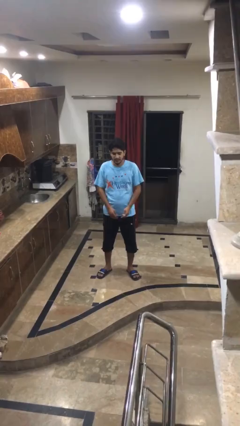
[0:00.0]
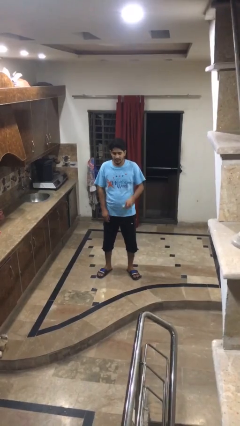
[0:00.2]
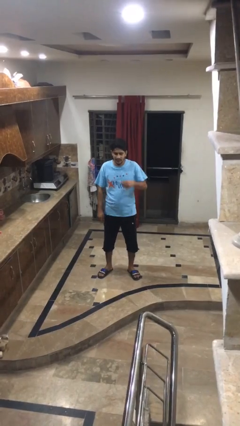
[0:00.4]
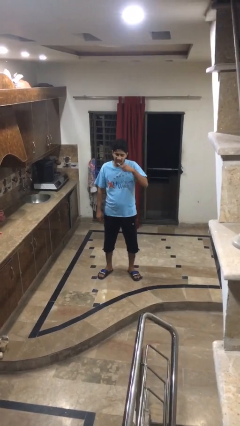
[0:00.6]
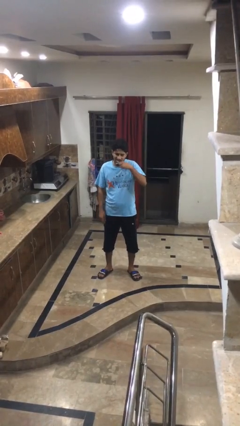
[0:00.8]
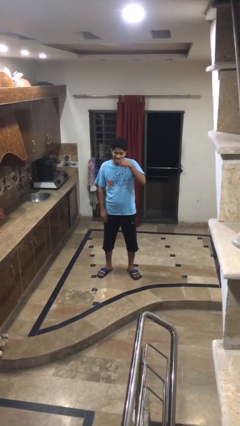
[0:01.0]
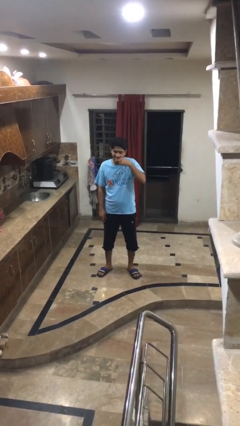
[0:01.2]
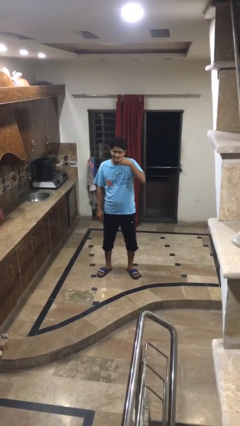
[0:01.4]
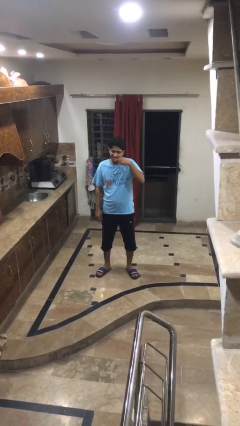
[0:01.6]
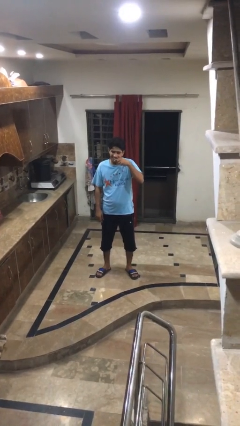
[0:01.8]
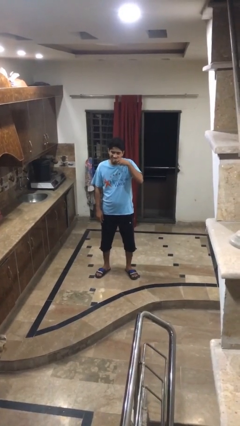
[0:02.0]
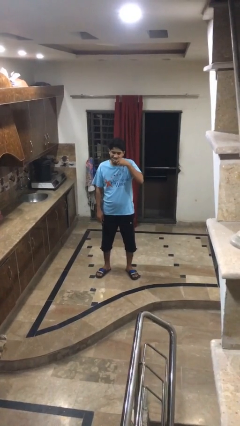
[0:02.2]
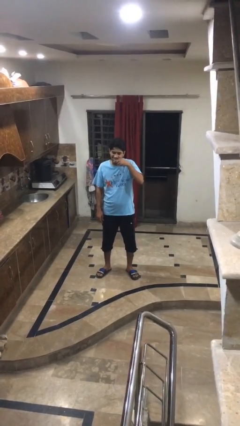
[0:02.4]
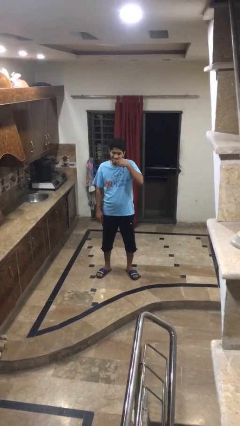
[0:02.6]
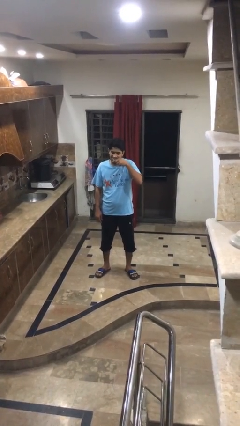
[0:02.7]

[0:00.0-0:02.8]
person brushes teeth

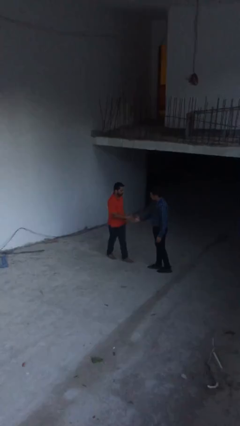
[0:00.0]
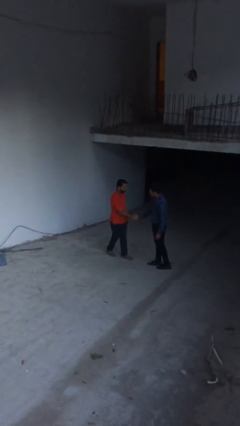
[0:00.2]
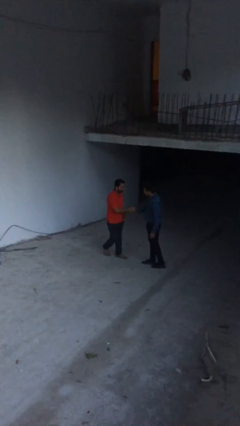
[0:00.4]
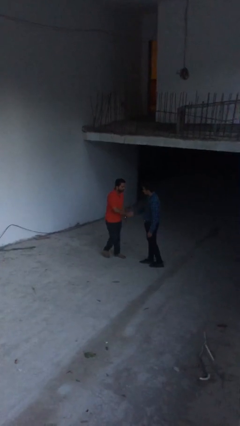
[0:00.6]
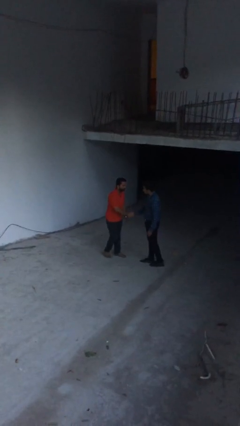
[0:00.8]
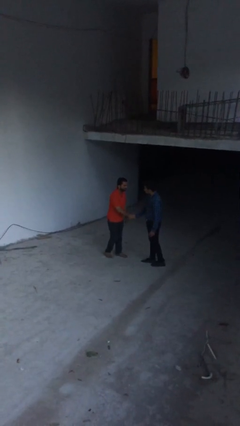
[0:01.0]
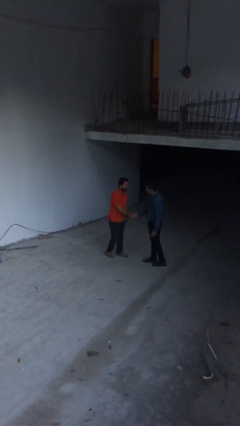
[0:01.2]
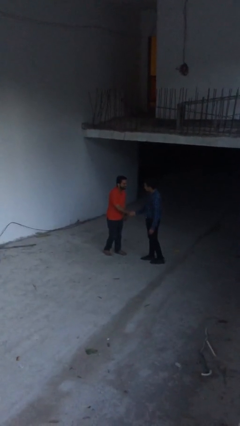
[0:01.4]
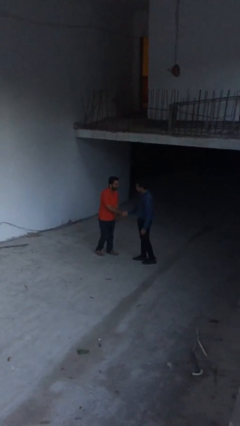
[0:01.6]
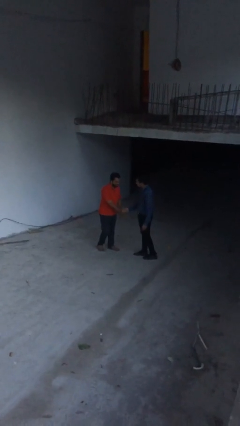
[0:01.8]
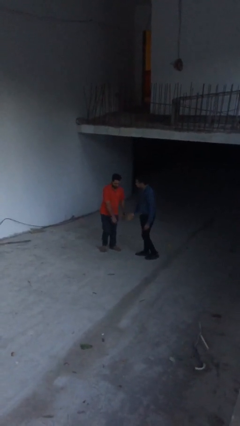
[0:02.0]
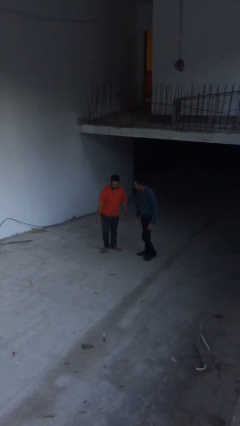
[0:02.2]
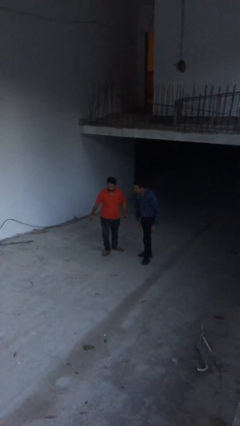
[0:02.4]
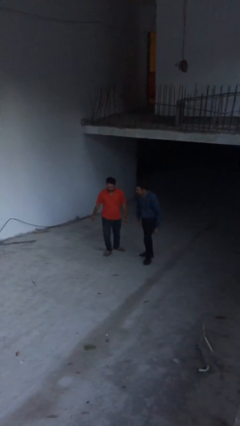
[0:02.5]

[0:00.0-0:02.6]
person shakes hand

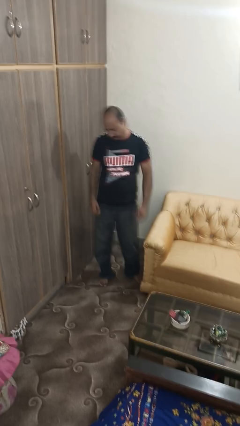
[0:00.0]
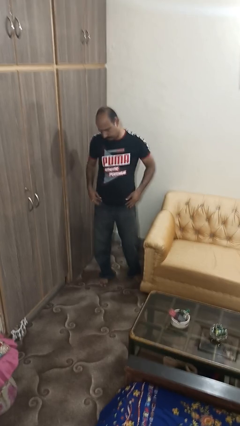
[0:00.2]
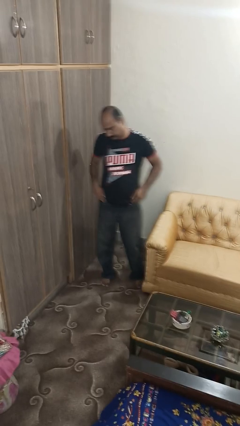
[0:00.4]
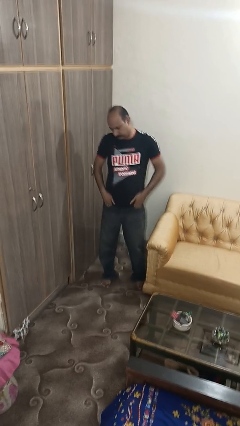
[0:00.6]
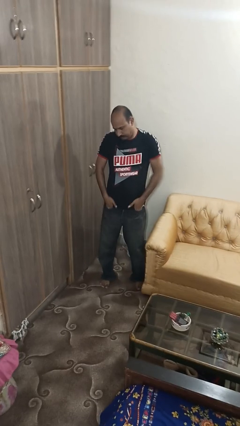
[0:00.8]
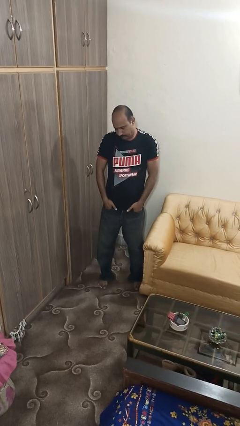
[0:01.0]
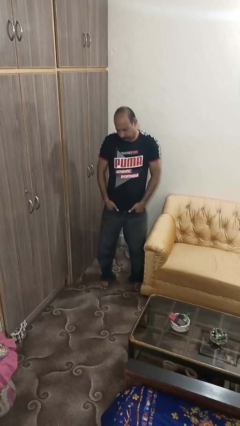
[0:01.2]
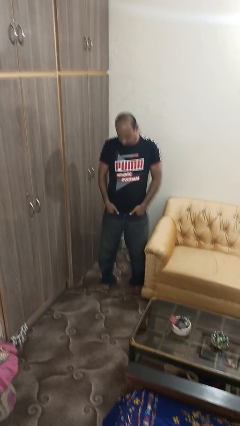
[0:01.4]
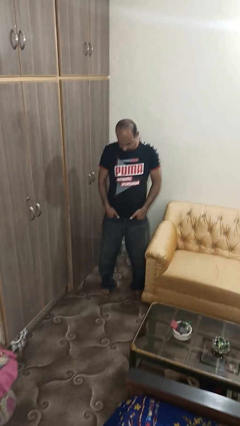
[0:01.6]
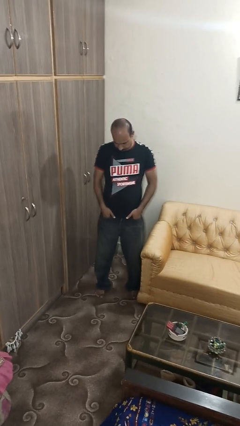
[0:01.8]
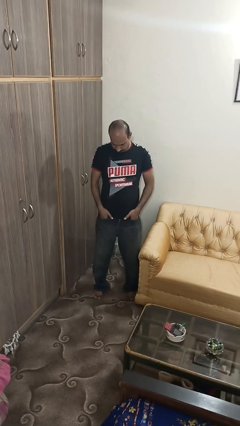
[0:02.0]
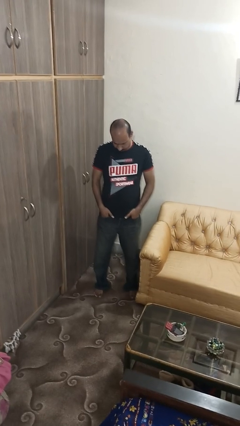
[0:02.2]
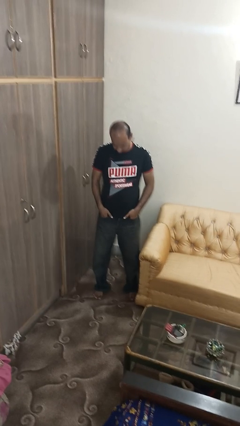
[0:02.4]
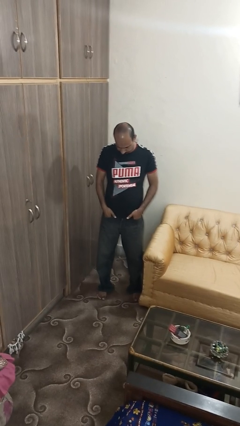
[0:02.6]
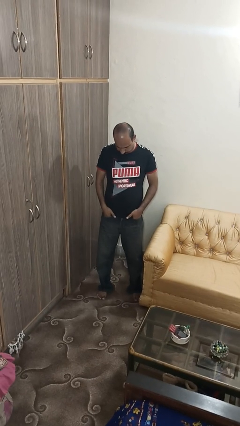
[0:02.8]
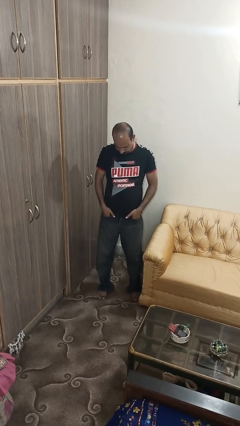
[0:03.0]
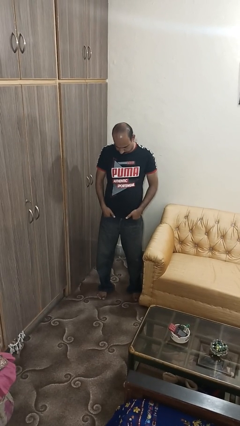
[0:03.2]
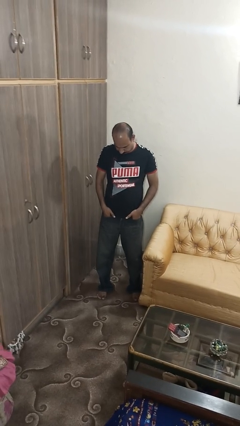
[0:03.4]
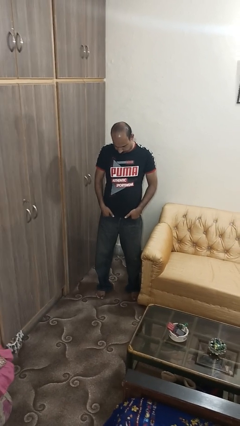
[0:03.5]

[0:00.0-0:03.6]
person puts hands in back pockets

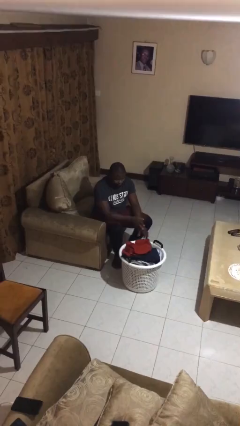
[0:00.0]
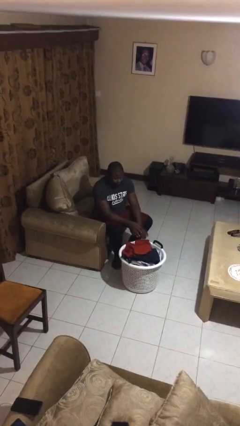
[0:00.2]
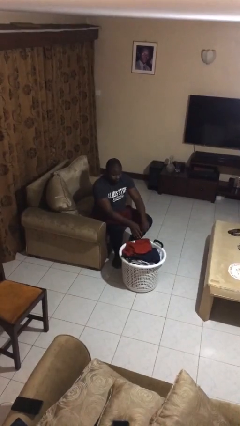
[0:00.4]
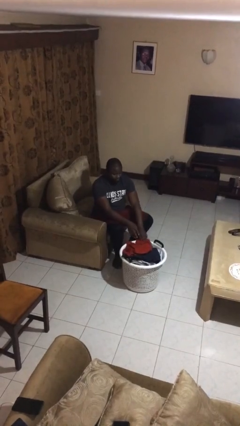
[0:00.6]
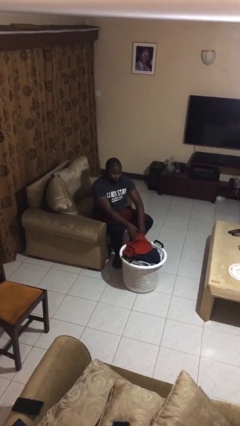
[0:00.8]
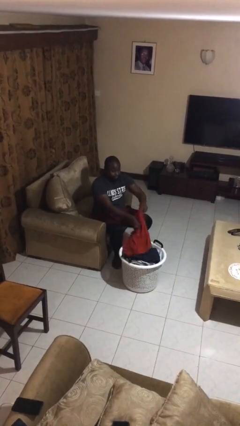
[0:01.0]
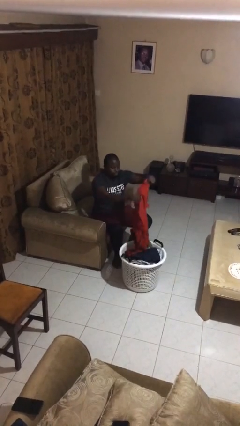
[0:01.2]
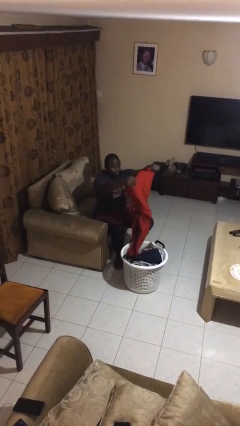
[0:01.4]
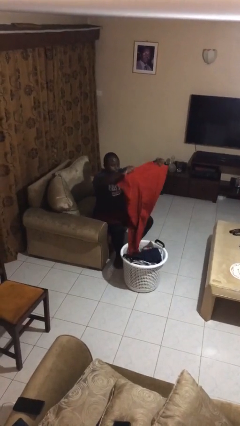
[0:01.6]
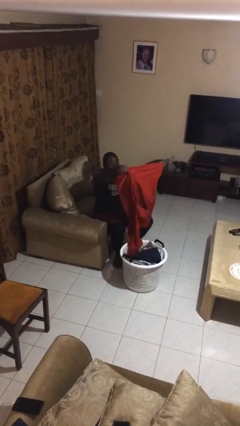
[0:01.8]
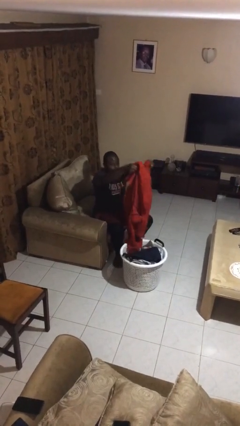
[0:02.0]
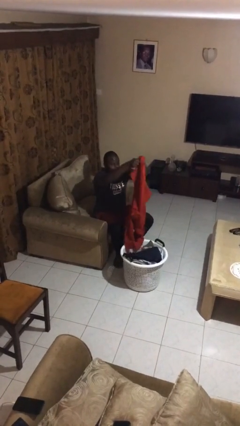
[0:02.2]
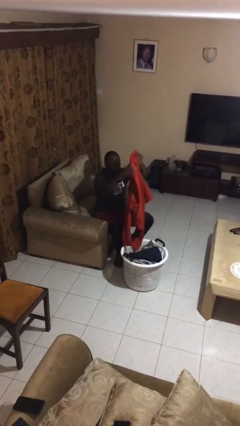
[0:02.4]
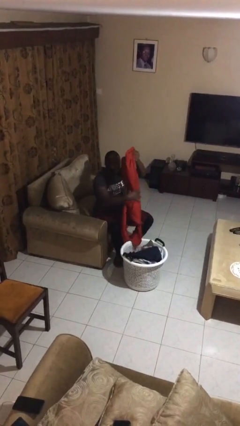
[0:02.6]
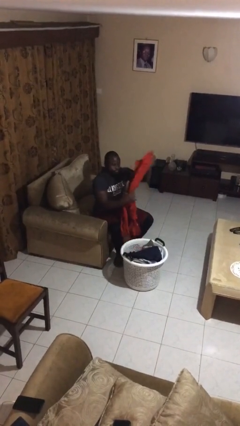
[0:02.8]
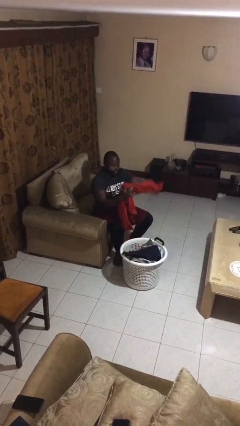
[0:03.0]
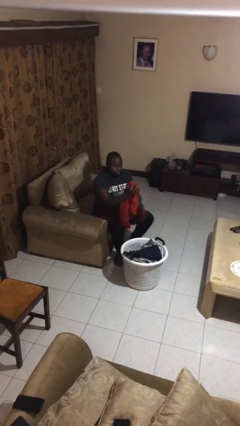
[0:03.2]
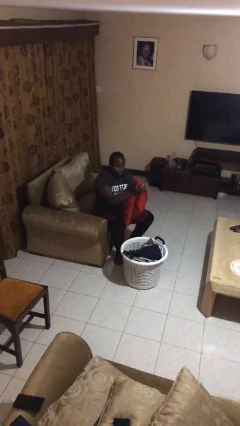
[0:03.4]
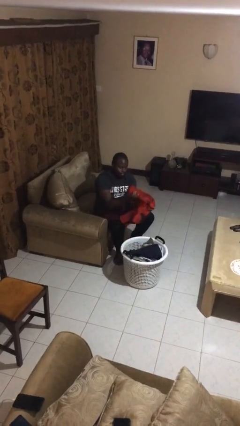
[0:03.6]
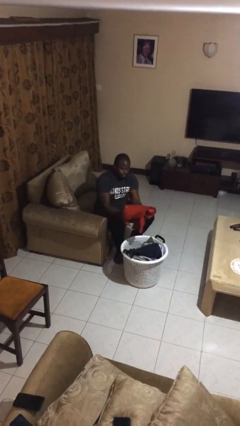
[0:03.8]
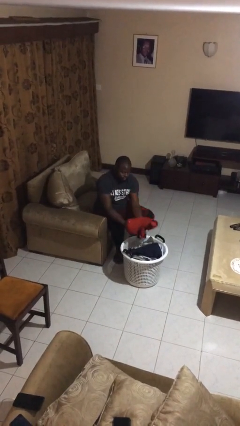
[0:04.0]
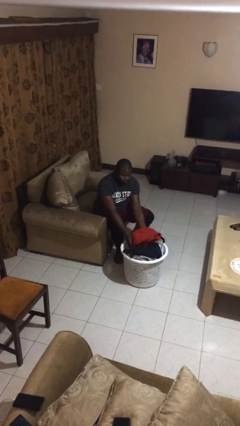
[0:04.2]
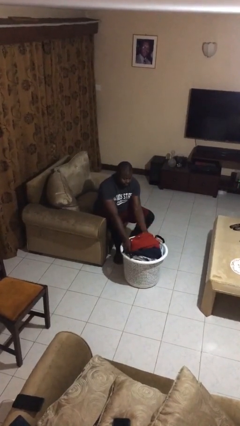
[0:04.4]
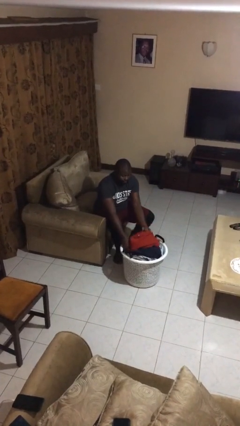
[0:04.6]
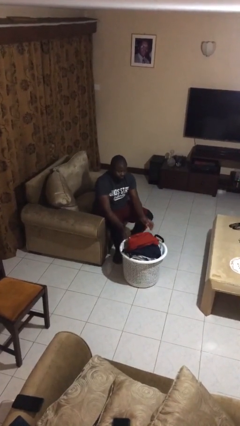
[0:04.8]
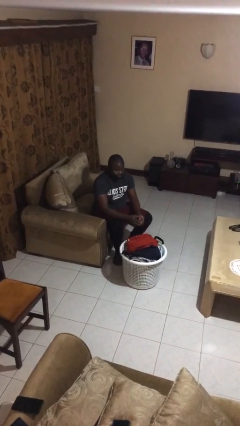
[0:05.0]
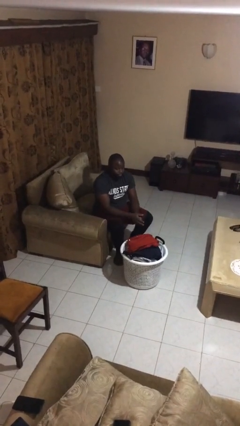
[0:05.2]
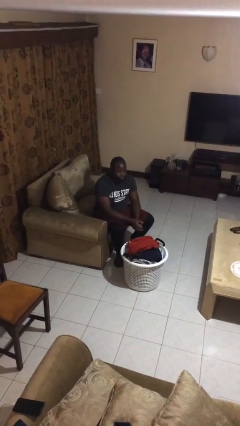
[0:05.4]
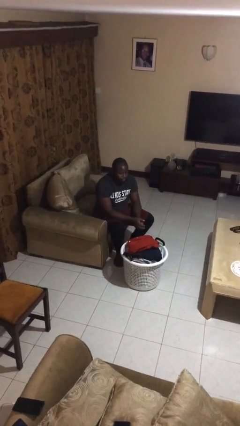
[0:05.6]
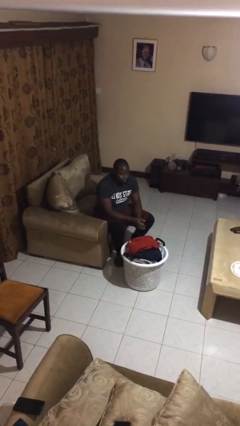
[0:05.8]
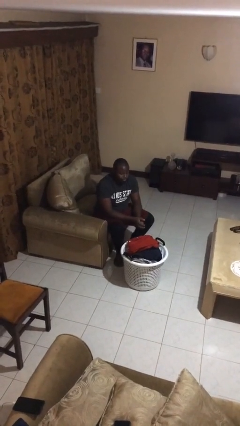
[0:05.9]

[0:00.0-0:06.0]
person folds shirt

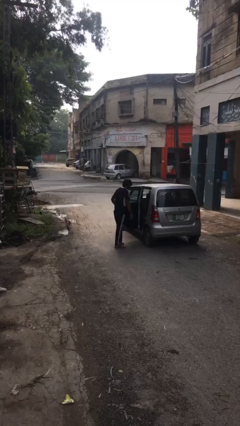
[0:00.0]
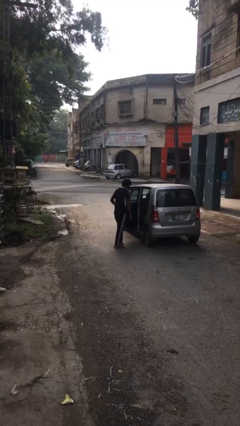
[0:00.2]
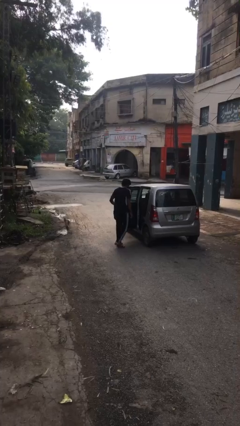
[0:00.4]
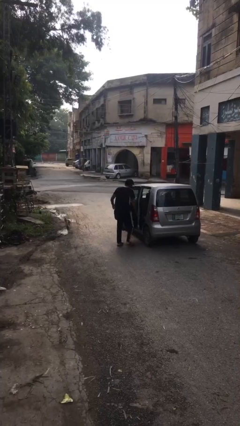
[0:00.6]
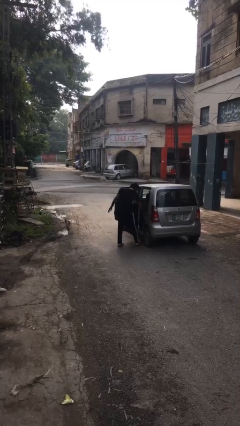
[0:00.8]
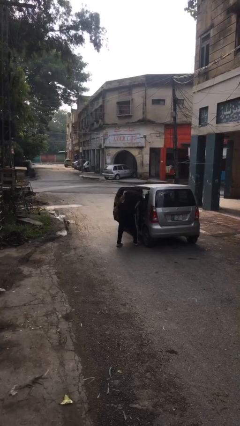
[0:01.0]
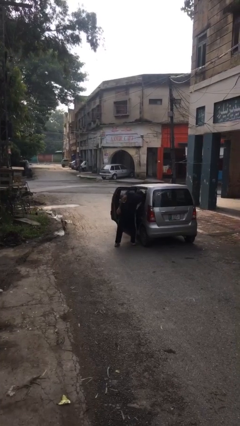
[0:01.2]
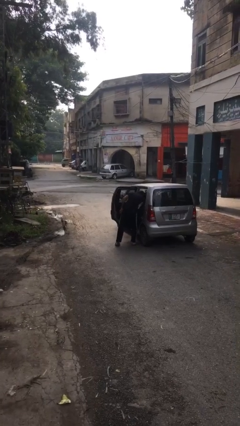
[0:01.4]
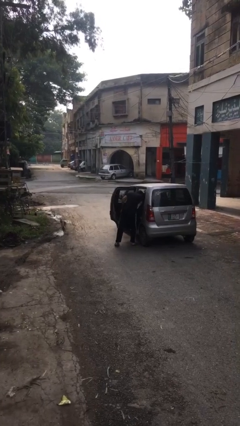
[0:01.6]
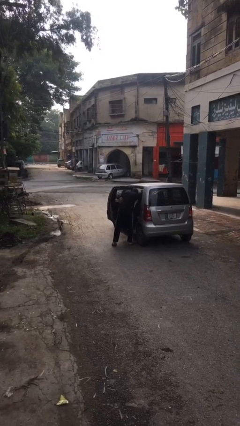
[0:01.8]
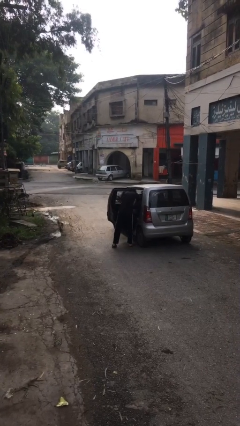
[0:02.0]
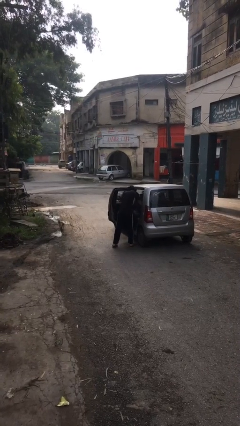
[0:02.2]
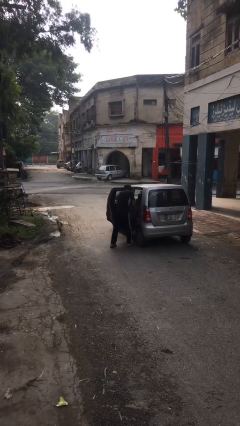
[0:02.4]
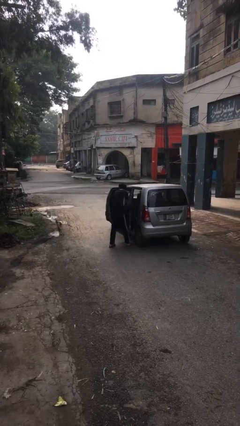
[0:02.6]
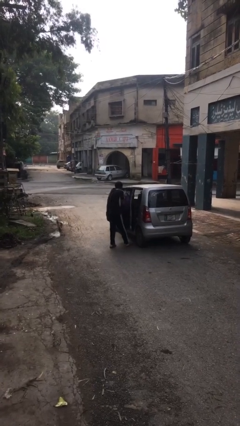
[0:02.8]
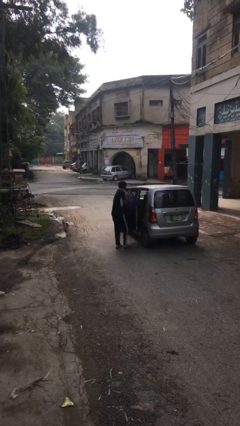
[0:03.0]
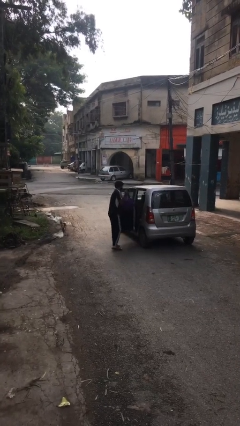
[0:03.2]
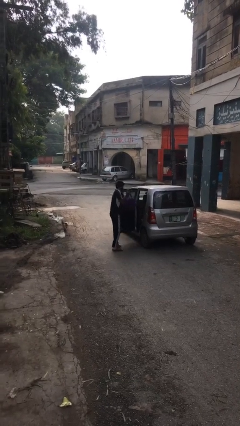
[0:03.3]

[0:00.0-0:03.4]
person unloads car
